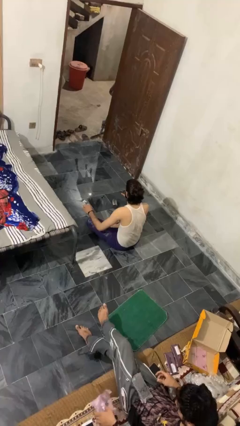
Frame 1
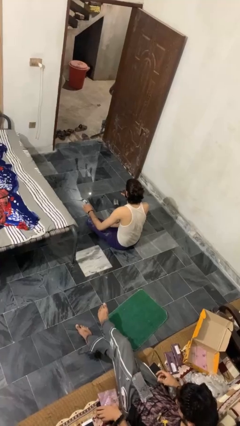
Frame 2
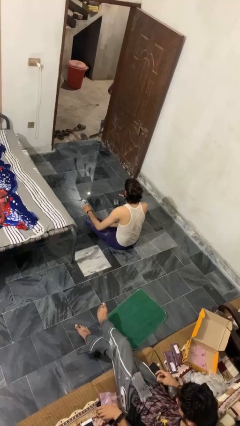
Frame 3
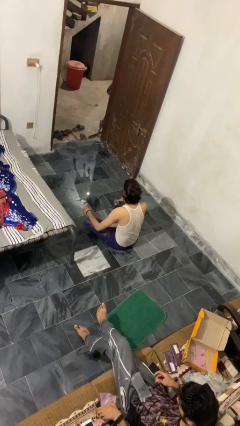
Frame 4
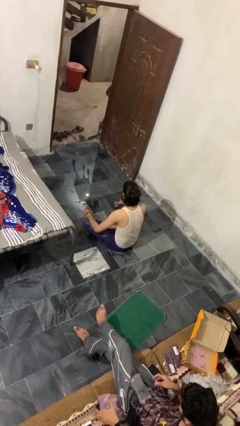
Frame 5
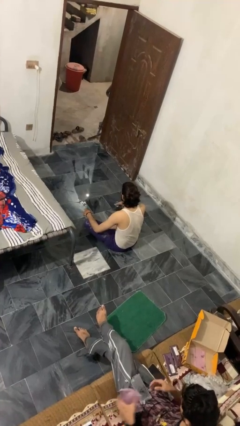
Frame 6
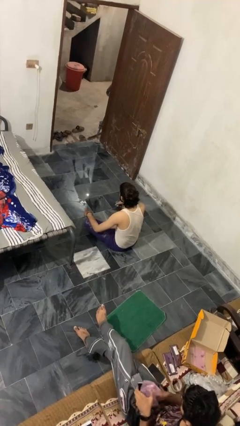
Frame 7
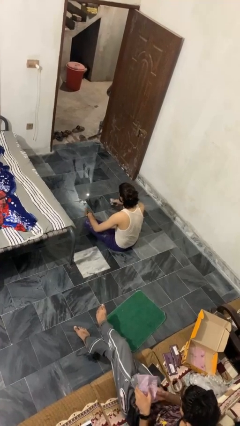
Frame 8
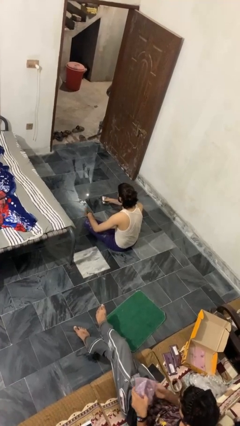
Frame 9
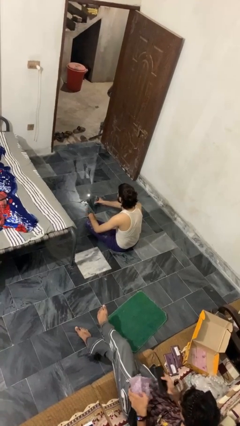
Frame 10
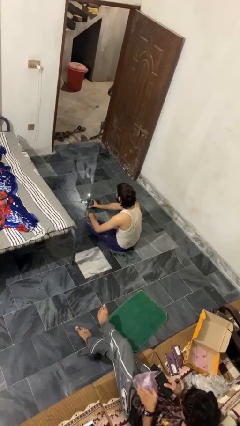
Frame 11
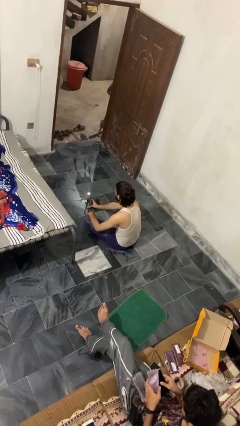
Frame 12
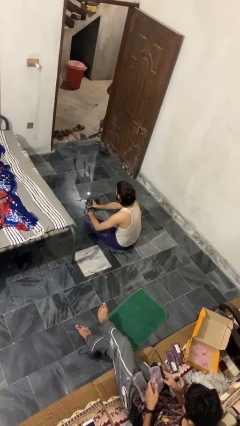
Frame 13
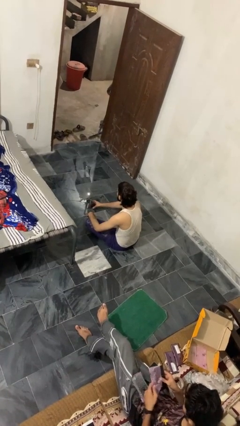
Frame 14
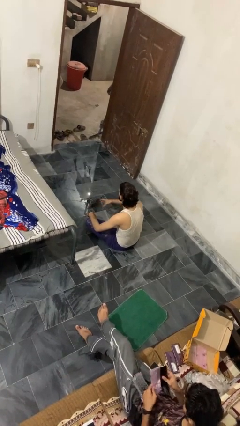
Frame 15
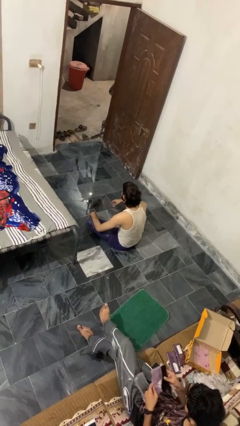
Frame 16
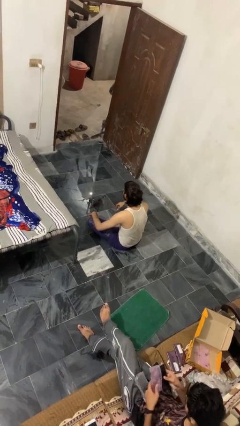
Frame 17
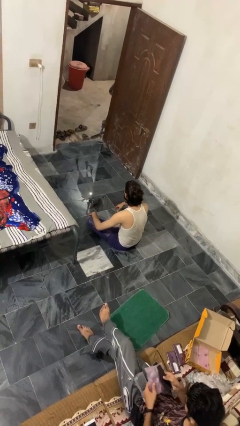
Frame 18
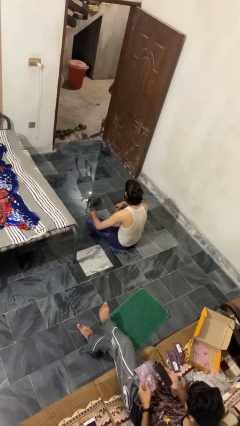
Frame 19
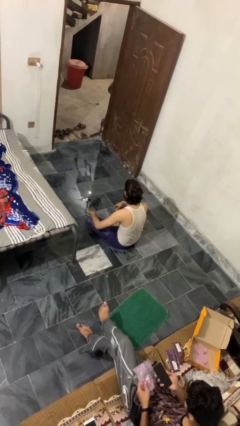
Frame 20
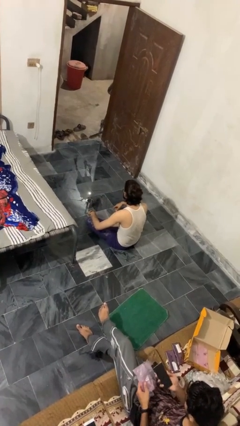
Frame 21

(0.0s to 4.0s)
person sets upright glass

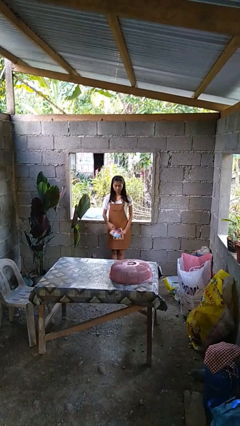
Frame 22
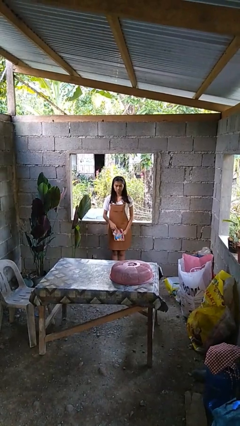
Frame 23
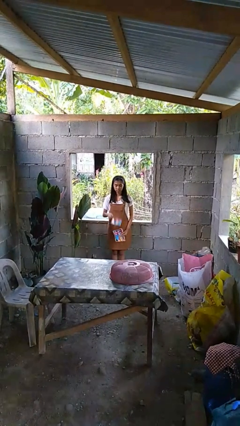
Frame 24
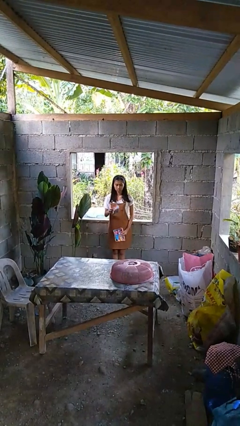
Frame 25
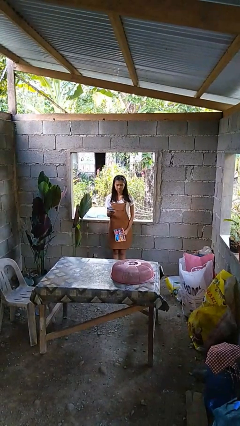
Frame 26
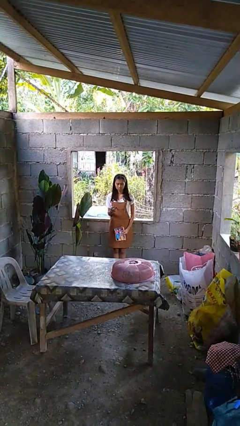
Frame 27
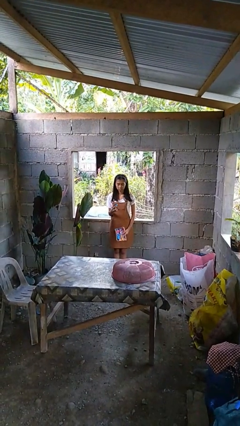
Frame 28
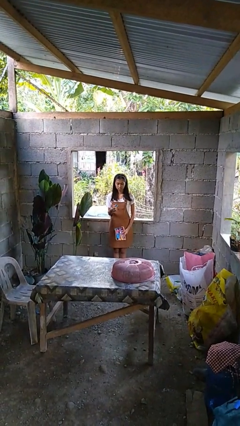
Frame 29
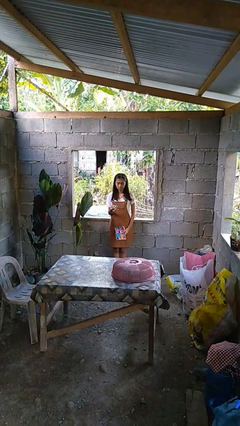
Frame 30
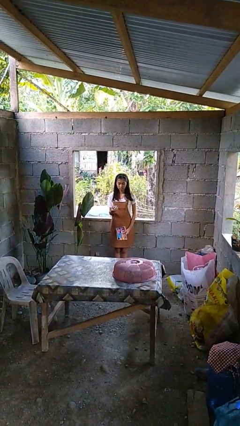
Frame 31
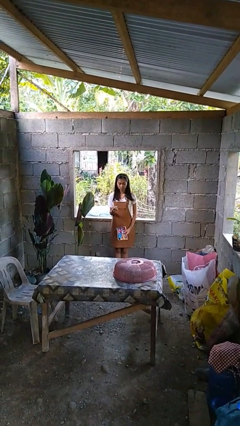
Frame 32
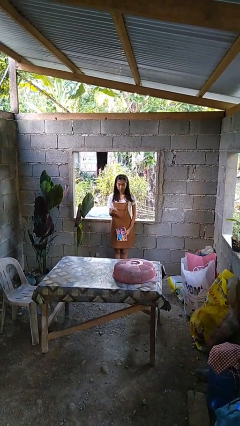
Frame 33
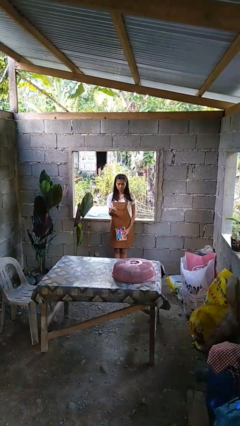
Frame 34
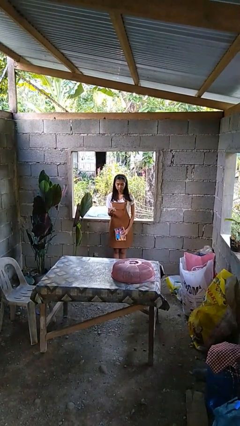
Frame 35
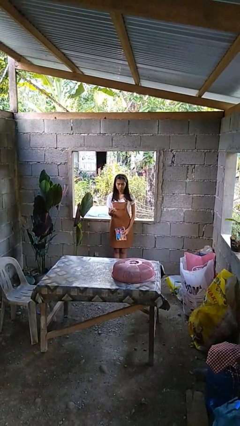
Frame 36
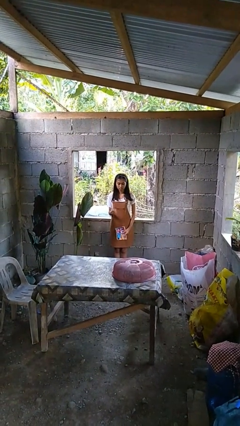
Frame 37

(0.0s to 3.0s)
person crumples paper

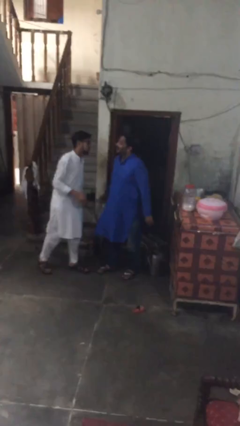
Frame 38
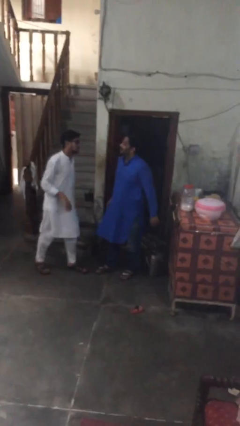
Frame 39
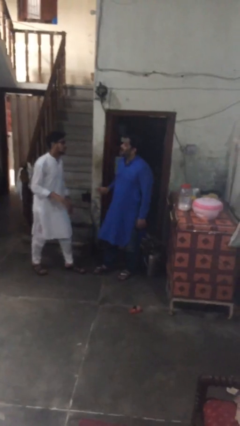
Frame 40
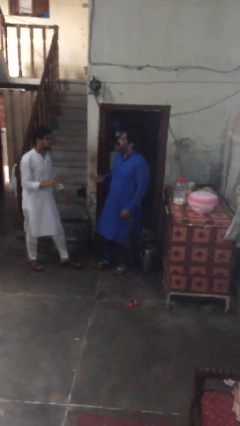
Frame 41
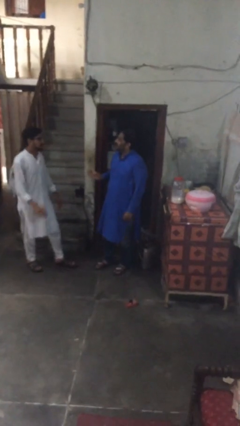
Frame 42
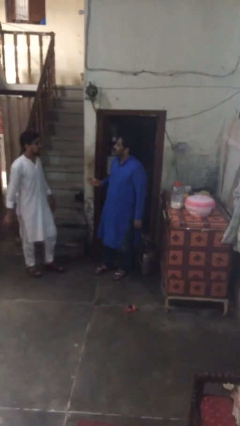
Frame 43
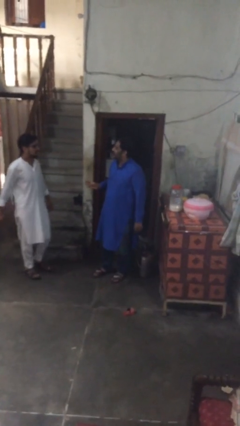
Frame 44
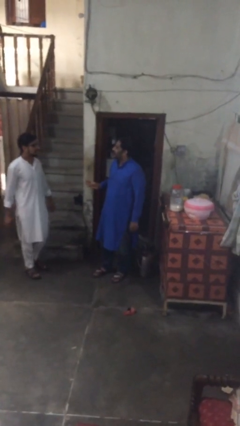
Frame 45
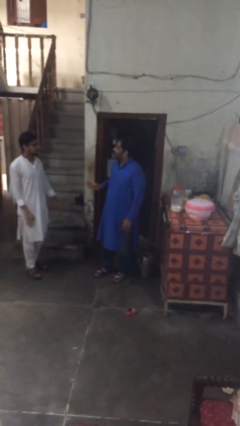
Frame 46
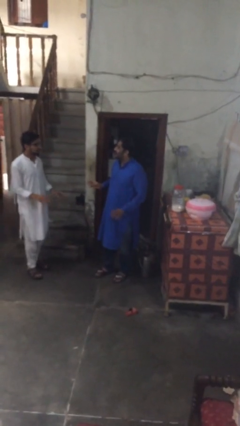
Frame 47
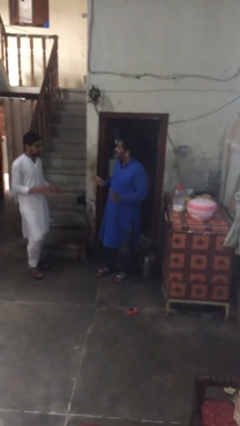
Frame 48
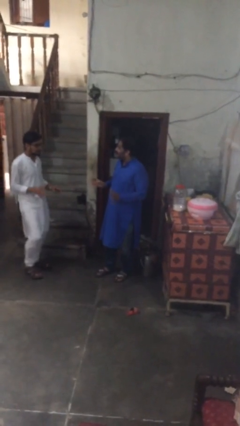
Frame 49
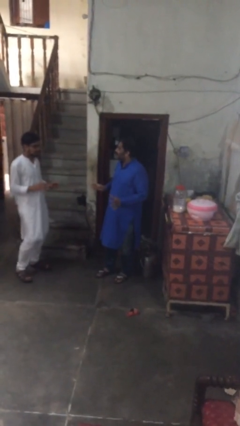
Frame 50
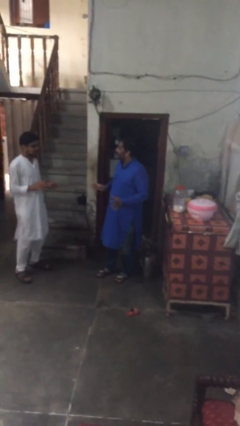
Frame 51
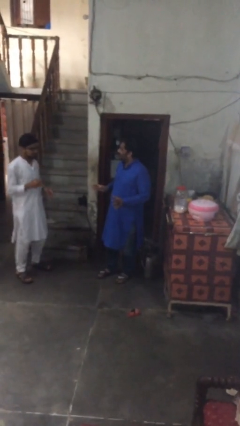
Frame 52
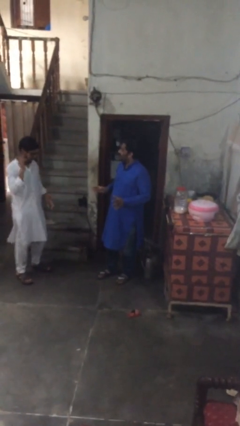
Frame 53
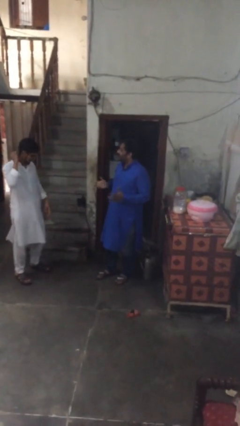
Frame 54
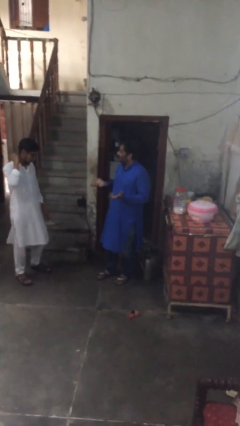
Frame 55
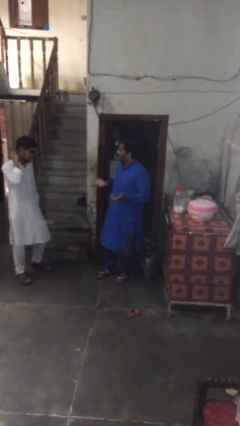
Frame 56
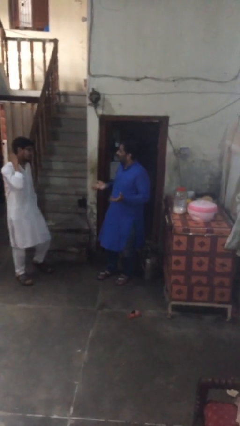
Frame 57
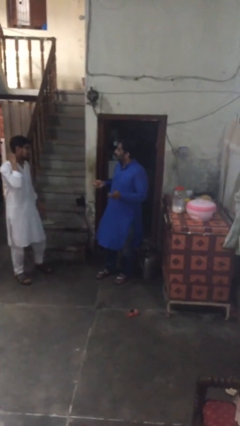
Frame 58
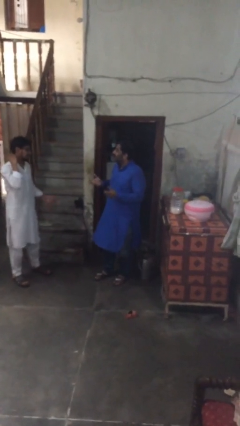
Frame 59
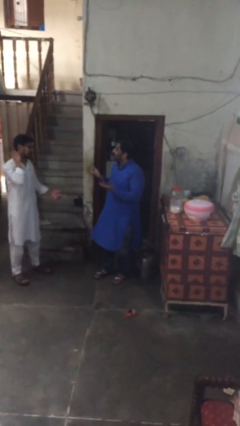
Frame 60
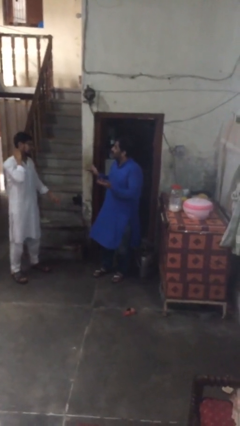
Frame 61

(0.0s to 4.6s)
person talks to person

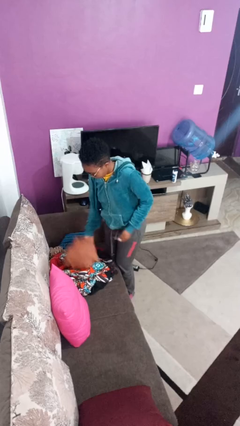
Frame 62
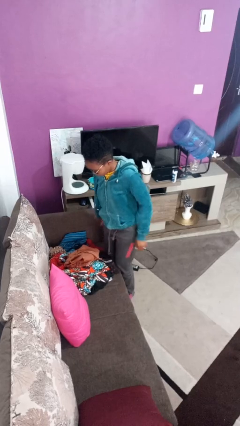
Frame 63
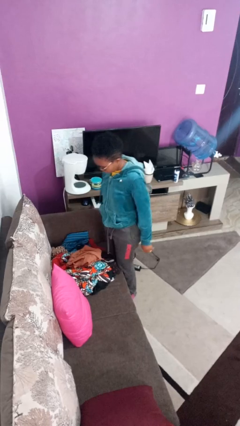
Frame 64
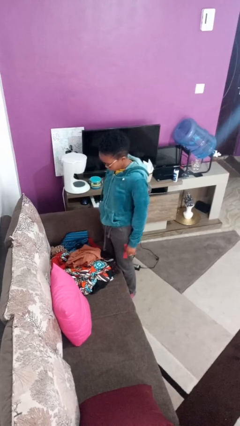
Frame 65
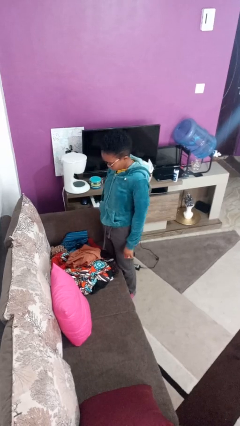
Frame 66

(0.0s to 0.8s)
person folds shirt

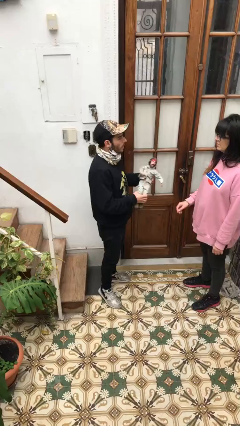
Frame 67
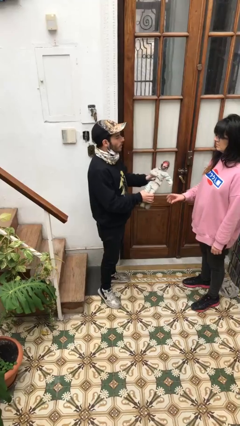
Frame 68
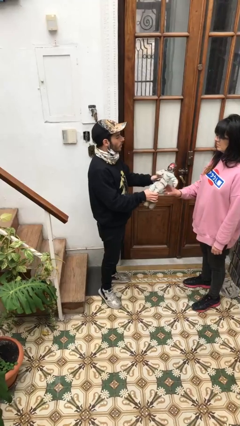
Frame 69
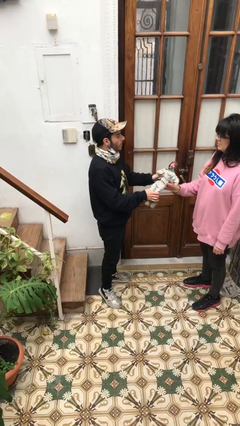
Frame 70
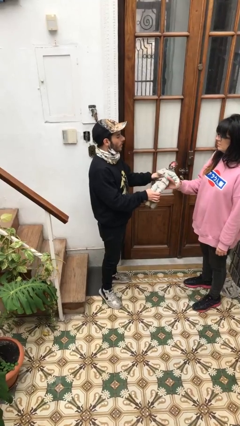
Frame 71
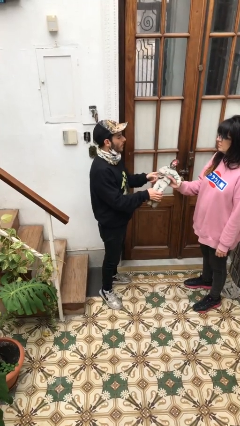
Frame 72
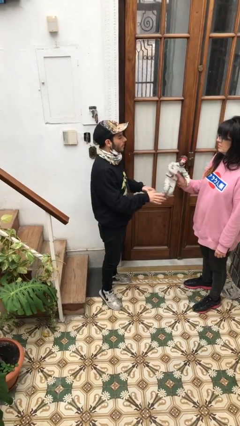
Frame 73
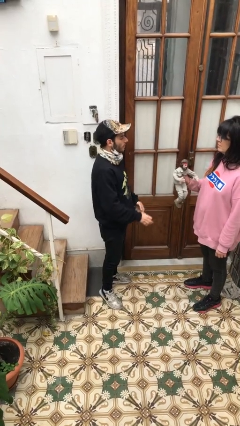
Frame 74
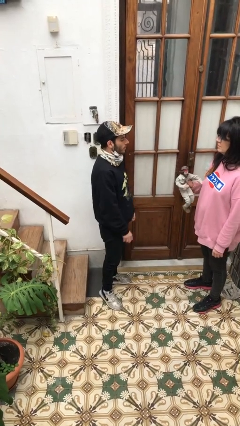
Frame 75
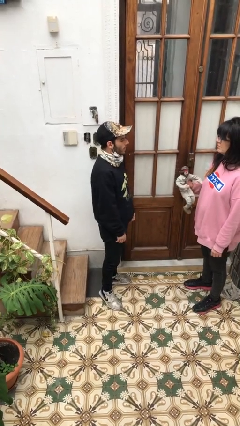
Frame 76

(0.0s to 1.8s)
person transfers object to person

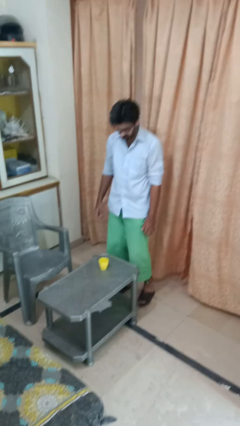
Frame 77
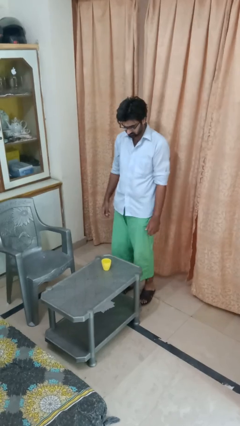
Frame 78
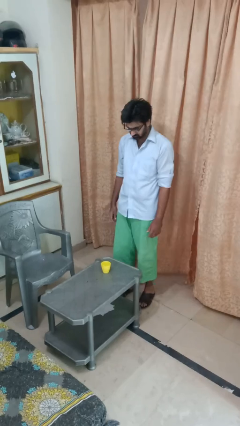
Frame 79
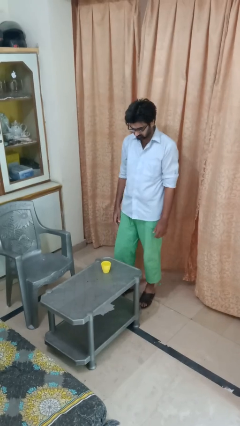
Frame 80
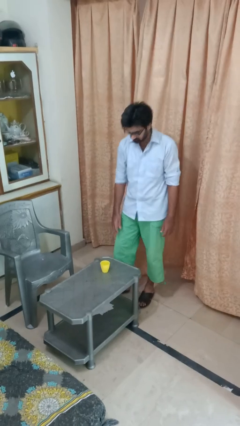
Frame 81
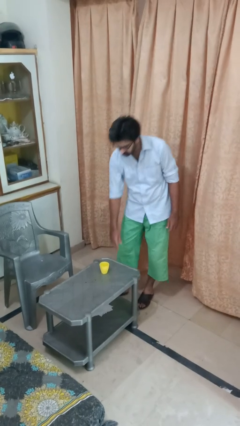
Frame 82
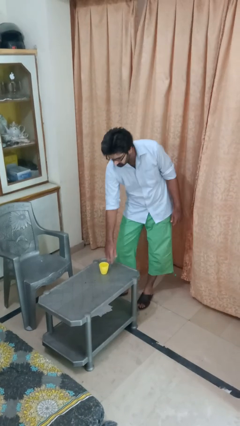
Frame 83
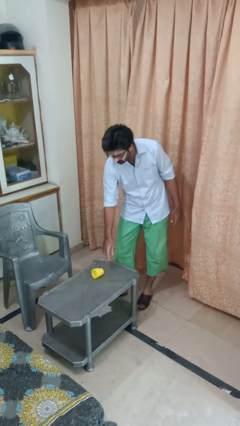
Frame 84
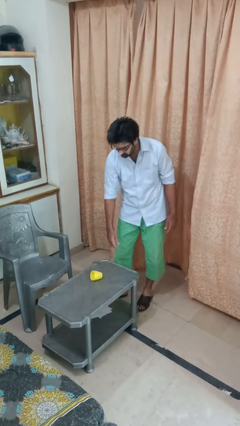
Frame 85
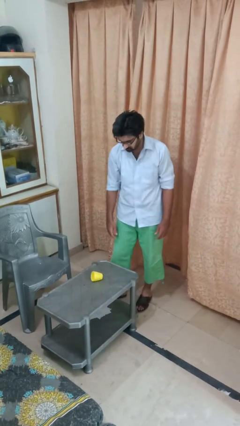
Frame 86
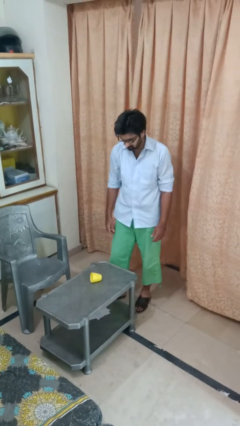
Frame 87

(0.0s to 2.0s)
person knocks over glass

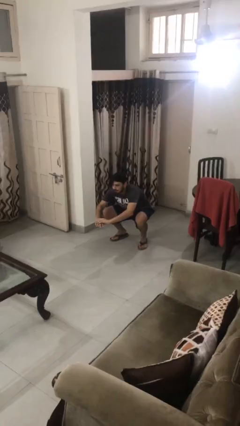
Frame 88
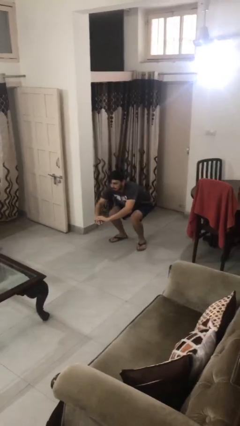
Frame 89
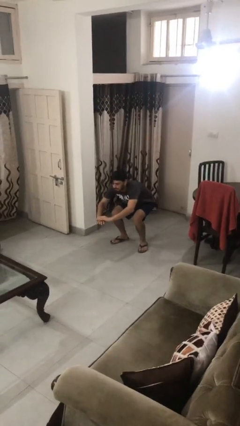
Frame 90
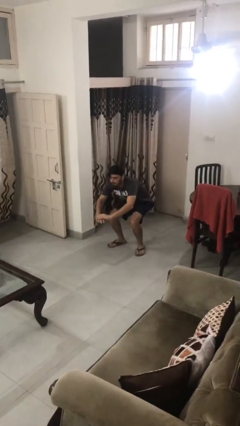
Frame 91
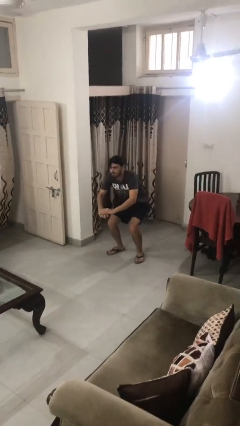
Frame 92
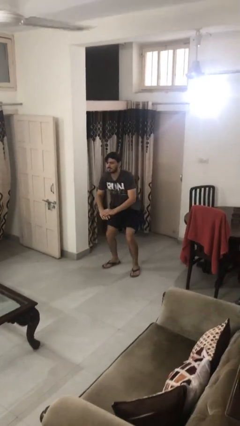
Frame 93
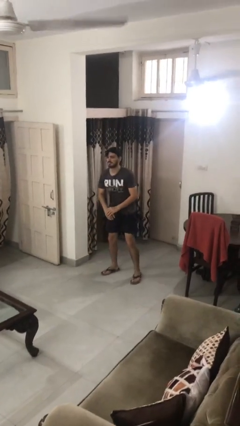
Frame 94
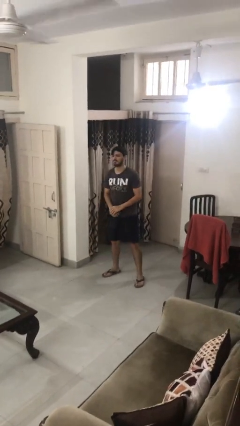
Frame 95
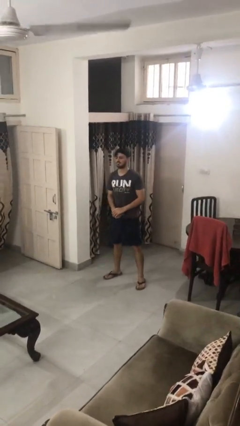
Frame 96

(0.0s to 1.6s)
person stands up
